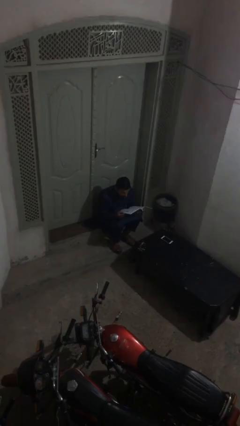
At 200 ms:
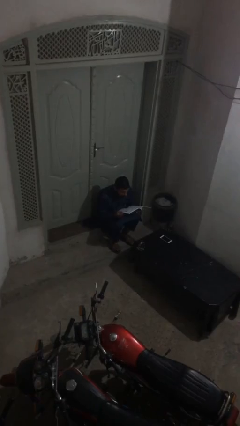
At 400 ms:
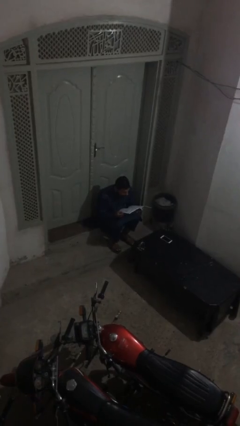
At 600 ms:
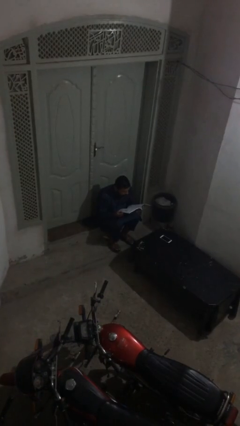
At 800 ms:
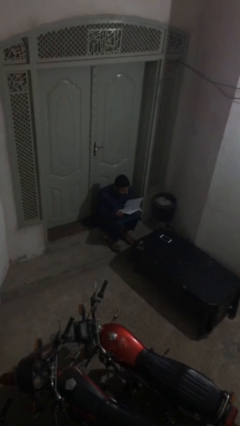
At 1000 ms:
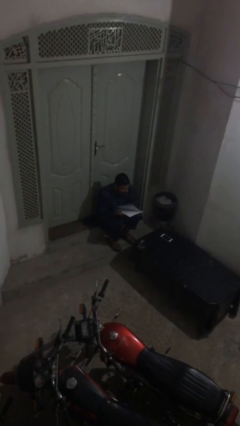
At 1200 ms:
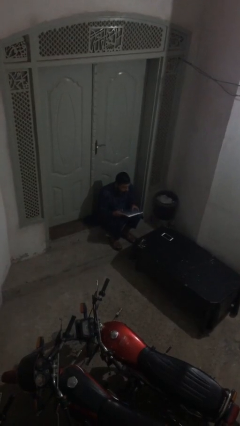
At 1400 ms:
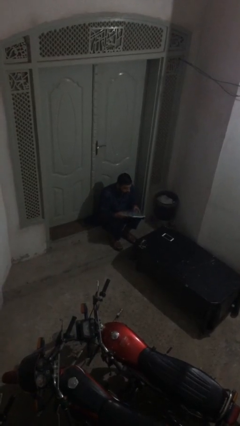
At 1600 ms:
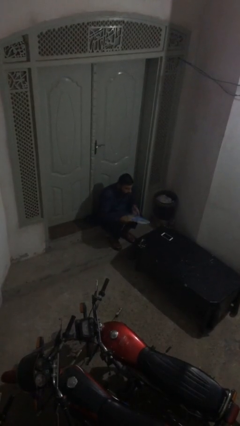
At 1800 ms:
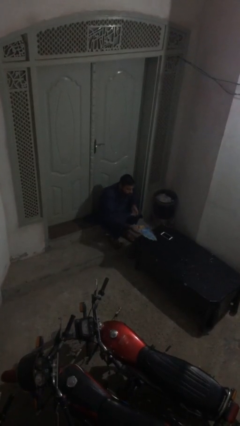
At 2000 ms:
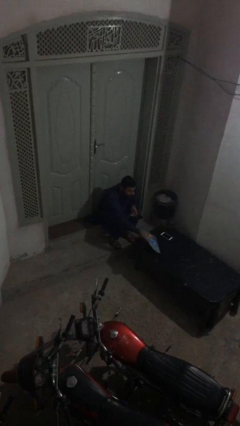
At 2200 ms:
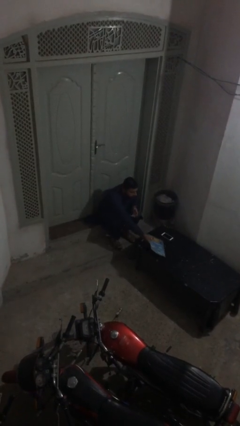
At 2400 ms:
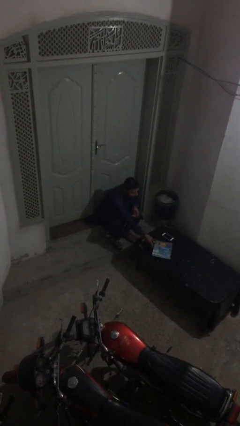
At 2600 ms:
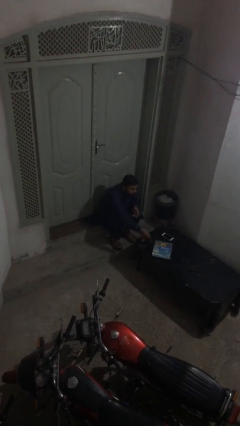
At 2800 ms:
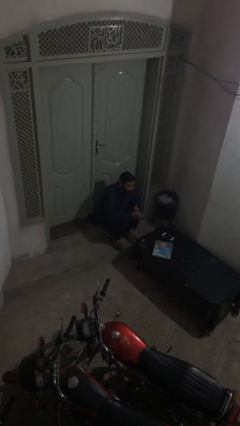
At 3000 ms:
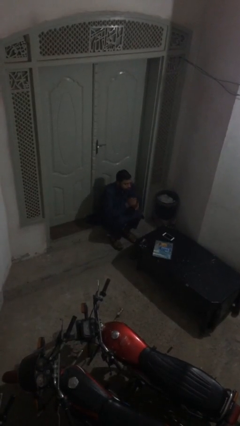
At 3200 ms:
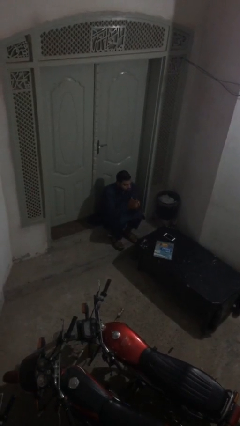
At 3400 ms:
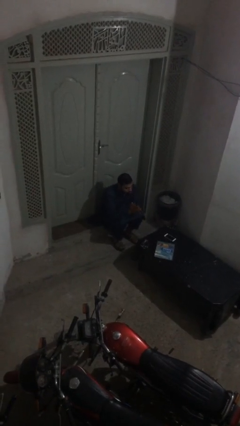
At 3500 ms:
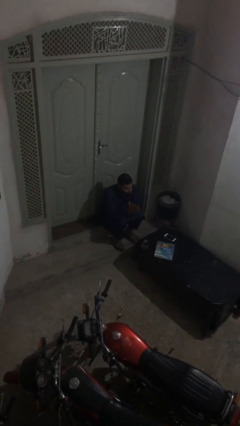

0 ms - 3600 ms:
person puts down object on table

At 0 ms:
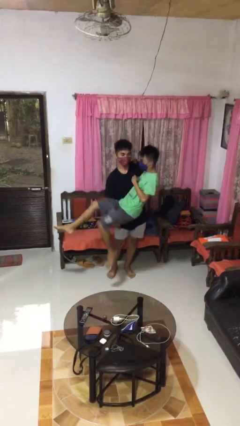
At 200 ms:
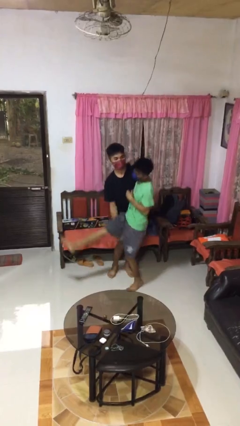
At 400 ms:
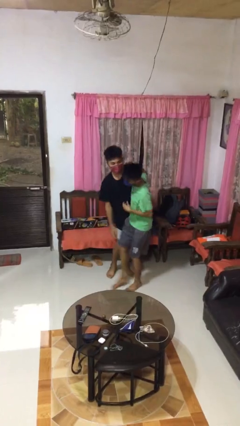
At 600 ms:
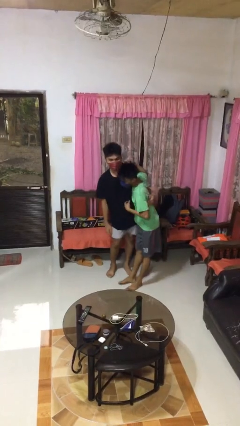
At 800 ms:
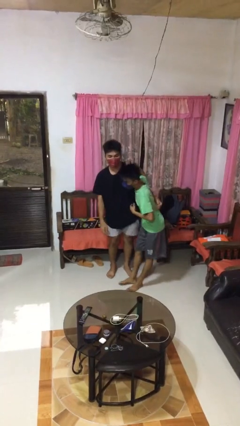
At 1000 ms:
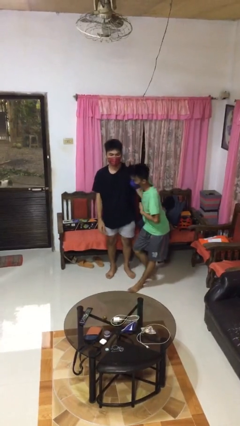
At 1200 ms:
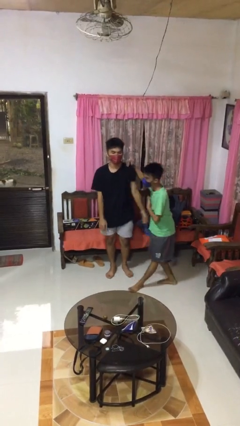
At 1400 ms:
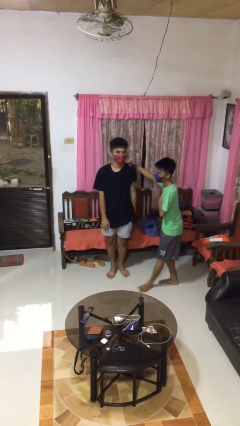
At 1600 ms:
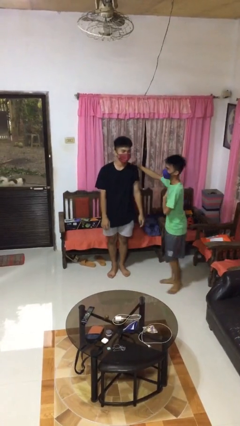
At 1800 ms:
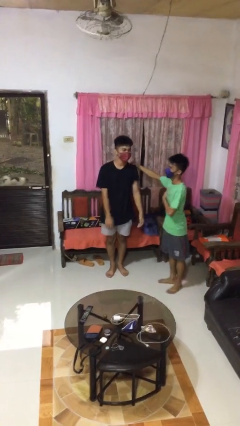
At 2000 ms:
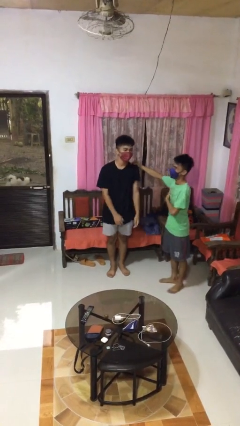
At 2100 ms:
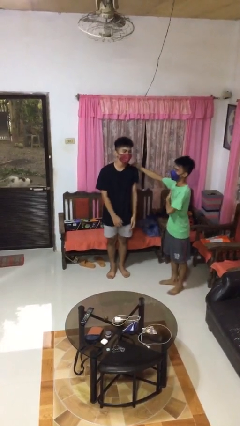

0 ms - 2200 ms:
person puts down person

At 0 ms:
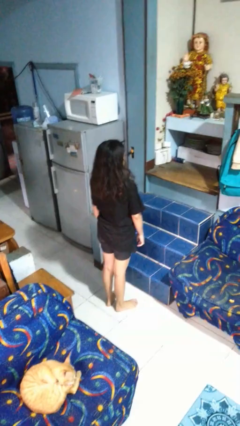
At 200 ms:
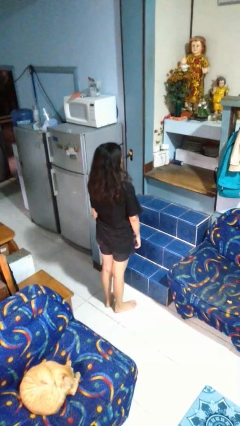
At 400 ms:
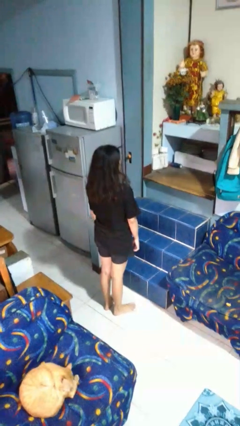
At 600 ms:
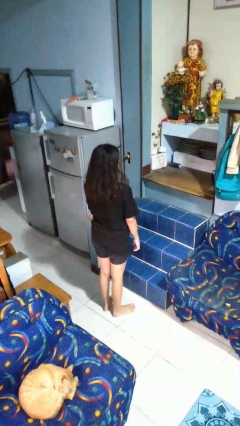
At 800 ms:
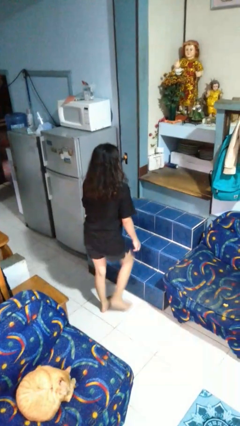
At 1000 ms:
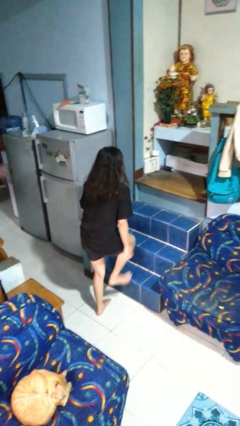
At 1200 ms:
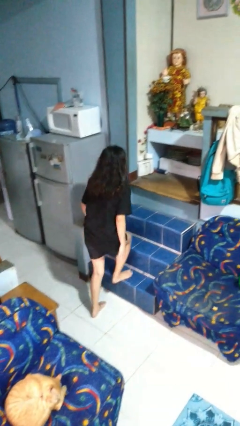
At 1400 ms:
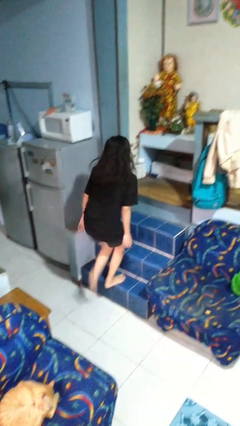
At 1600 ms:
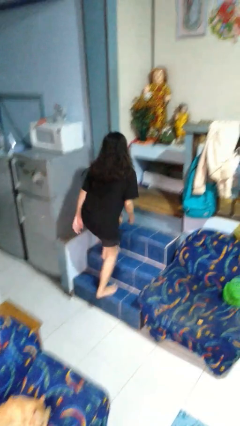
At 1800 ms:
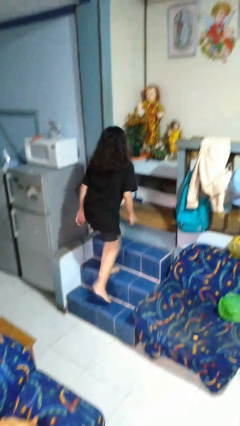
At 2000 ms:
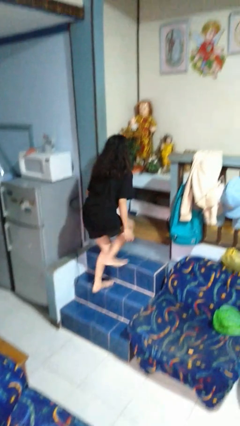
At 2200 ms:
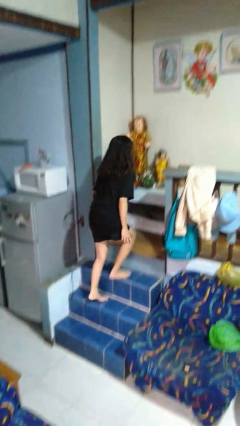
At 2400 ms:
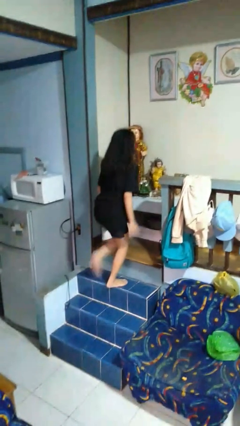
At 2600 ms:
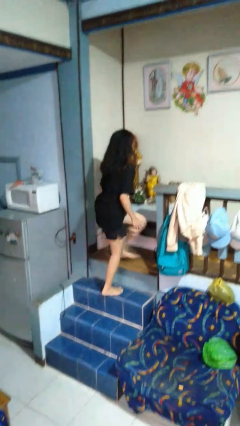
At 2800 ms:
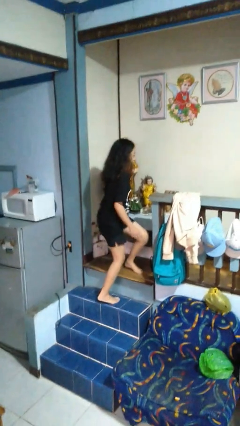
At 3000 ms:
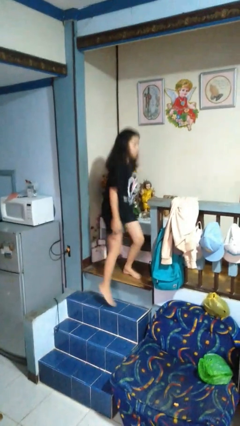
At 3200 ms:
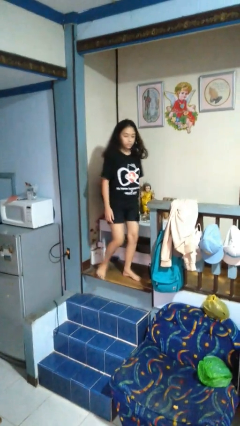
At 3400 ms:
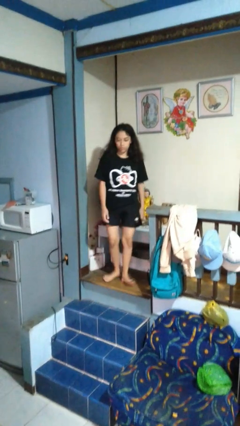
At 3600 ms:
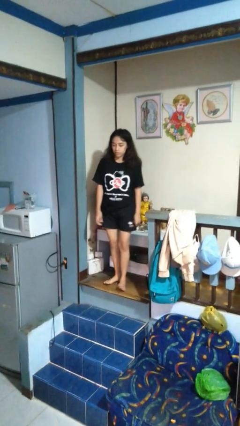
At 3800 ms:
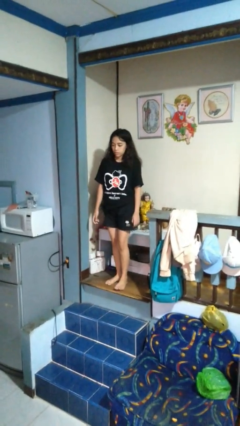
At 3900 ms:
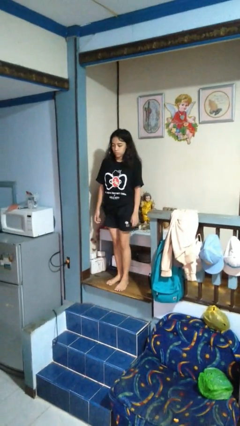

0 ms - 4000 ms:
person climbs up stairs

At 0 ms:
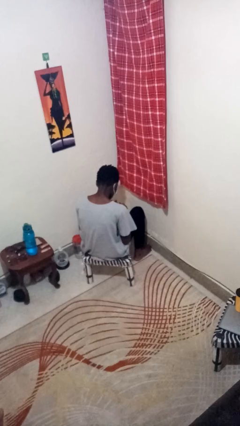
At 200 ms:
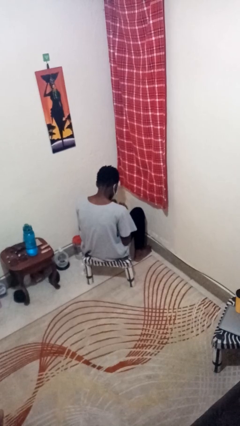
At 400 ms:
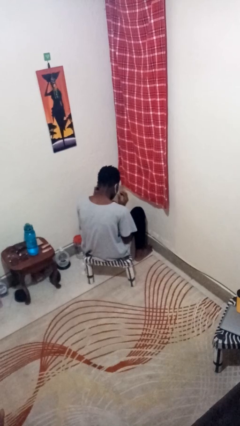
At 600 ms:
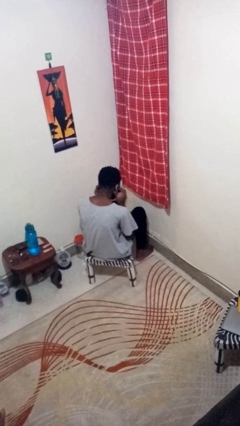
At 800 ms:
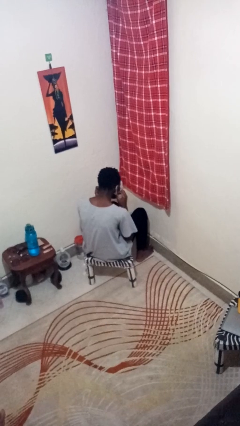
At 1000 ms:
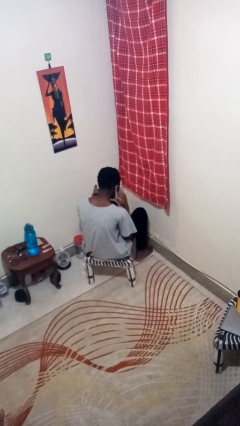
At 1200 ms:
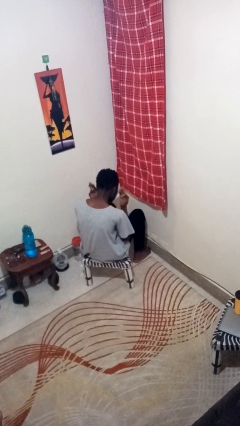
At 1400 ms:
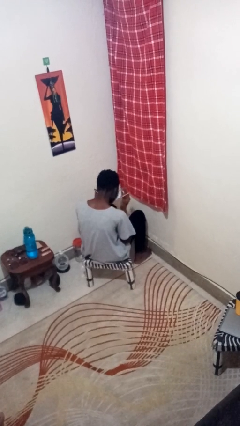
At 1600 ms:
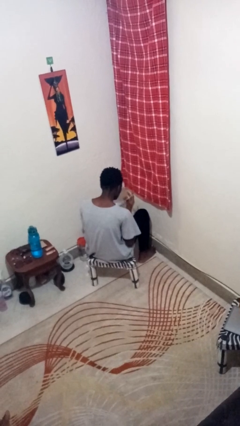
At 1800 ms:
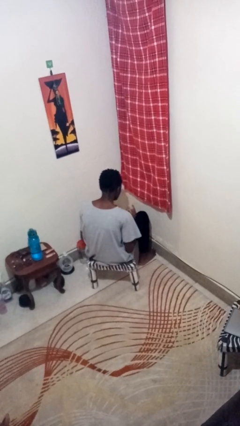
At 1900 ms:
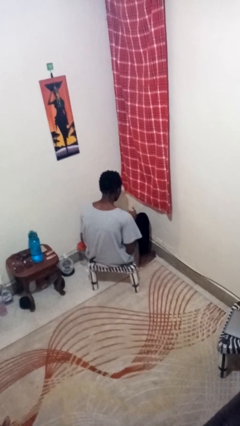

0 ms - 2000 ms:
person takes off facemask

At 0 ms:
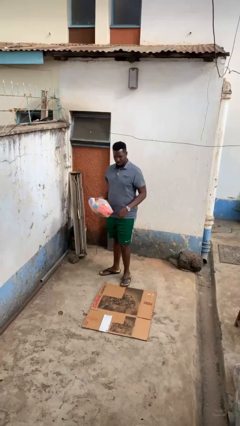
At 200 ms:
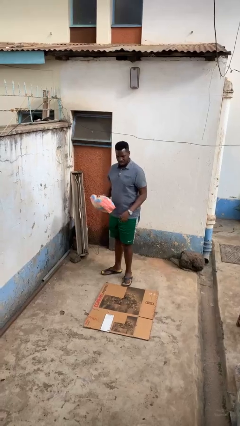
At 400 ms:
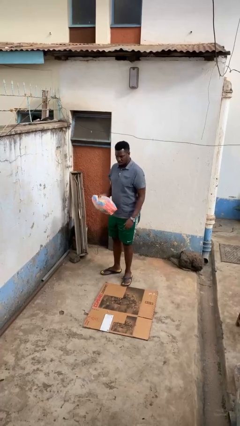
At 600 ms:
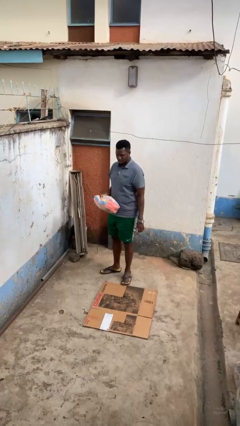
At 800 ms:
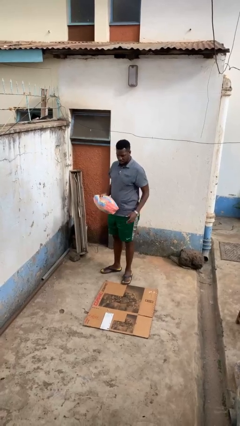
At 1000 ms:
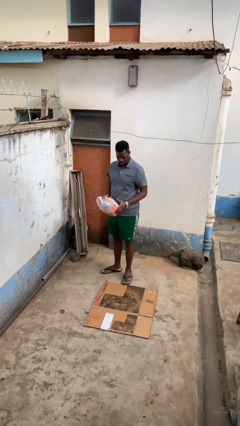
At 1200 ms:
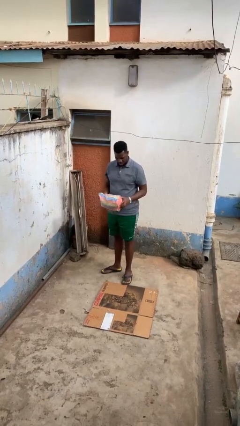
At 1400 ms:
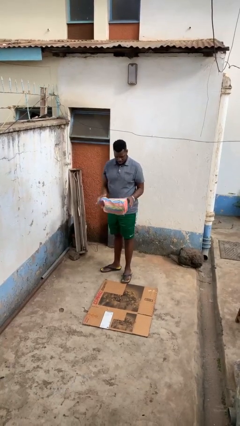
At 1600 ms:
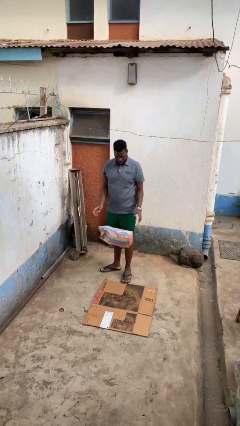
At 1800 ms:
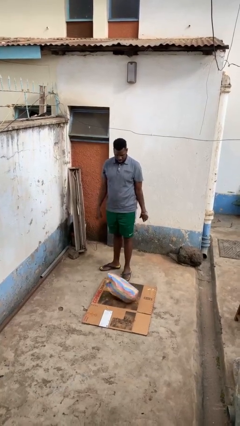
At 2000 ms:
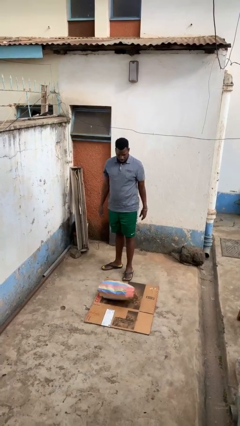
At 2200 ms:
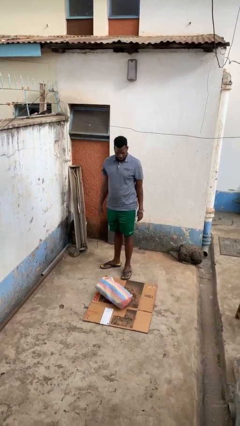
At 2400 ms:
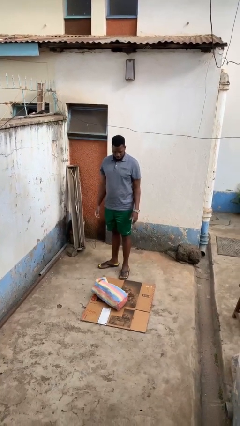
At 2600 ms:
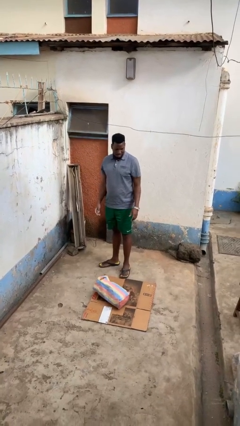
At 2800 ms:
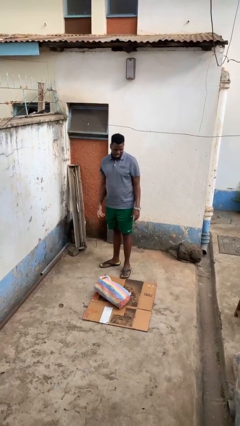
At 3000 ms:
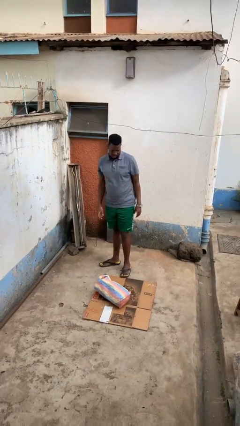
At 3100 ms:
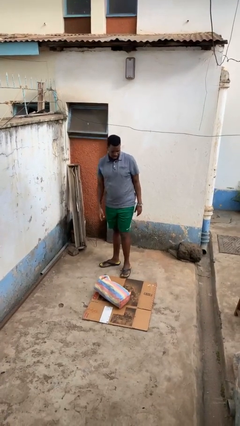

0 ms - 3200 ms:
person drops object

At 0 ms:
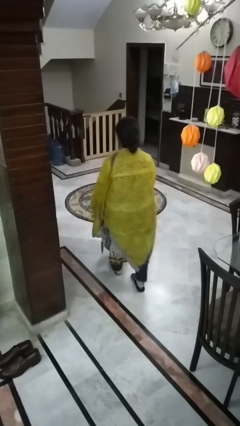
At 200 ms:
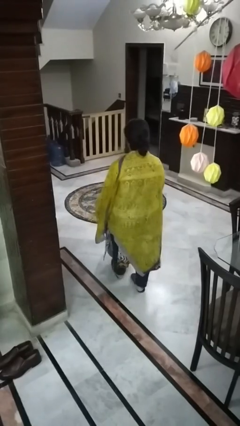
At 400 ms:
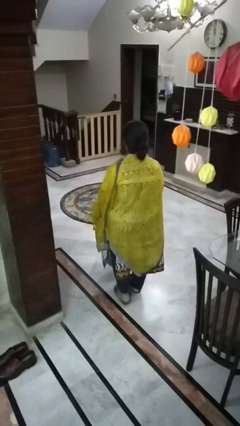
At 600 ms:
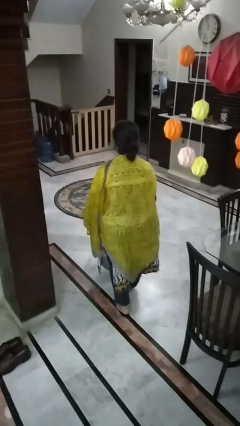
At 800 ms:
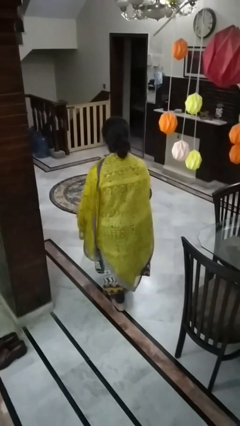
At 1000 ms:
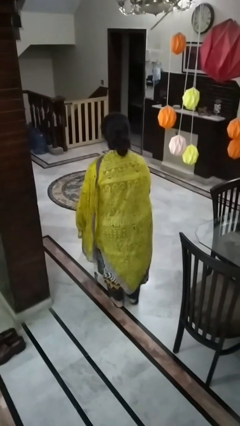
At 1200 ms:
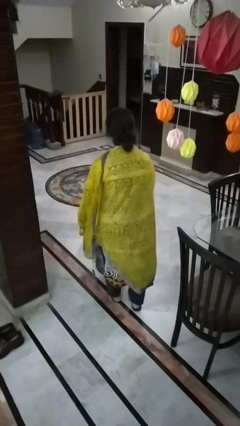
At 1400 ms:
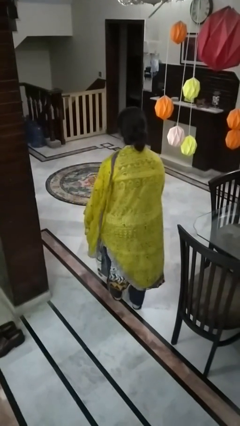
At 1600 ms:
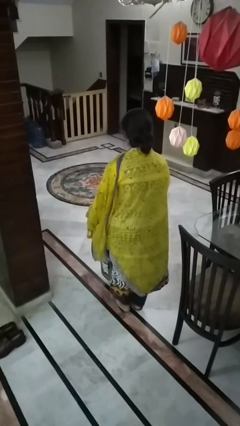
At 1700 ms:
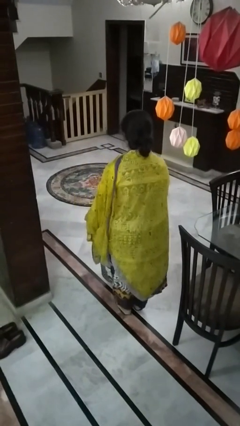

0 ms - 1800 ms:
person carries laundry basket

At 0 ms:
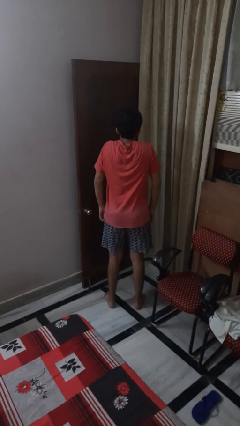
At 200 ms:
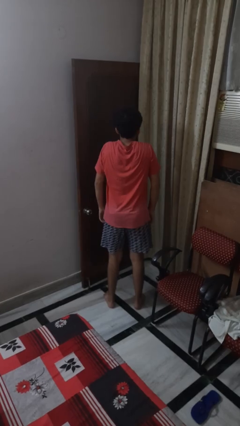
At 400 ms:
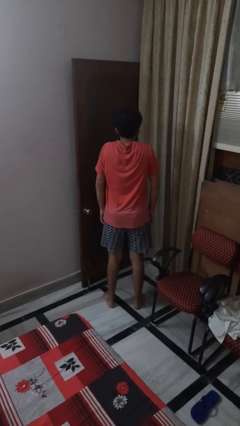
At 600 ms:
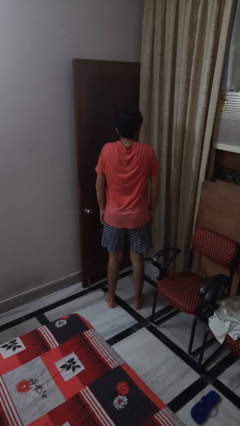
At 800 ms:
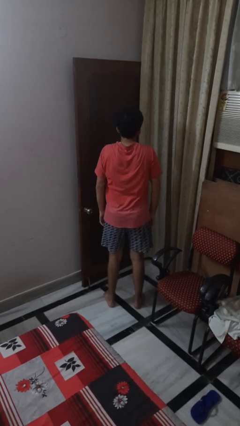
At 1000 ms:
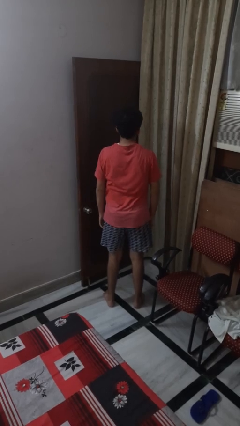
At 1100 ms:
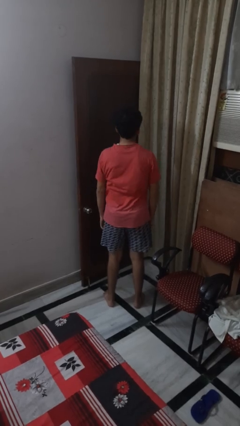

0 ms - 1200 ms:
person shrugs
